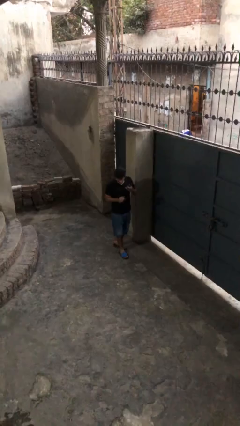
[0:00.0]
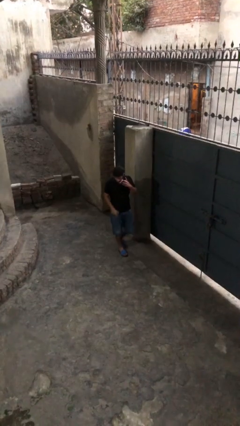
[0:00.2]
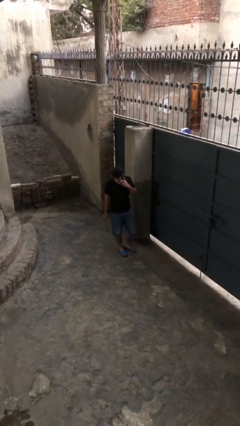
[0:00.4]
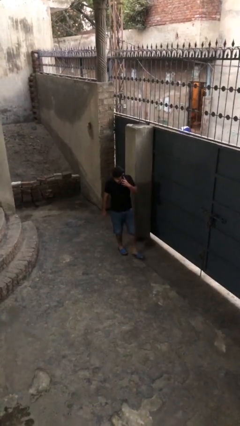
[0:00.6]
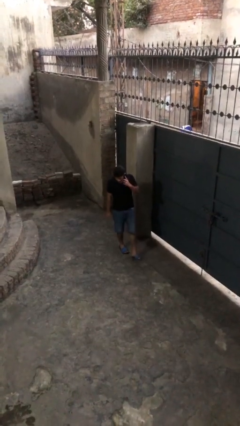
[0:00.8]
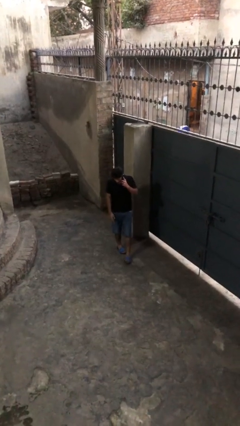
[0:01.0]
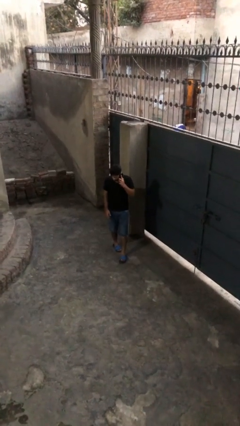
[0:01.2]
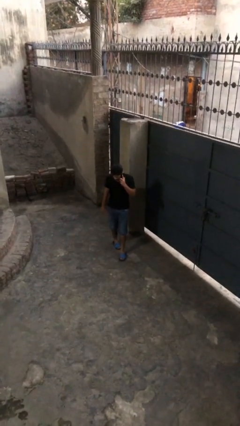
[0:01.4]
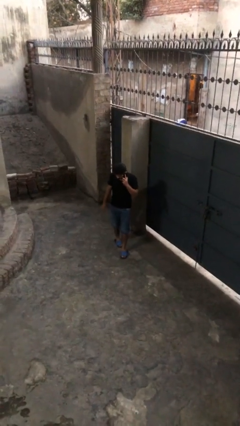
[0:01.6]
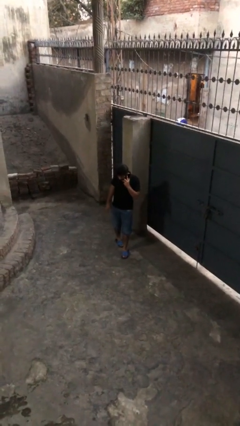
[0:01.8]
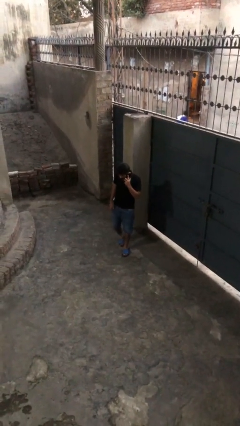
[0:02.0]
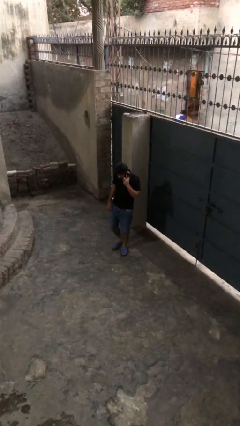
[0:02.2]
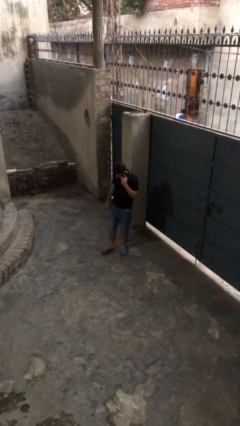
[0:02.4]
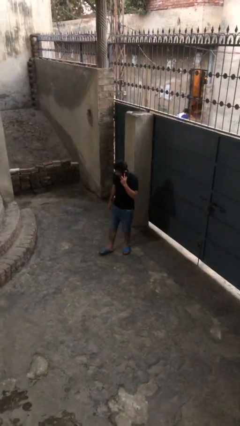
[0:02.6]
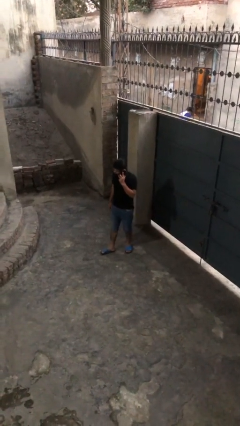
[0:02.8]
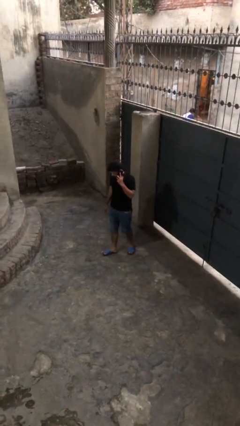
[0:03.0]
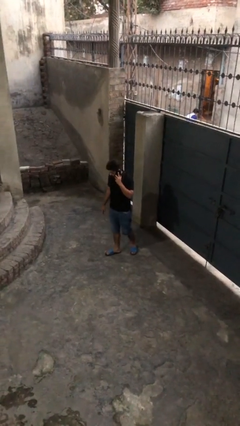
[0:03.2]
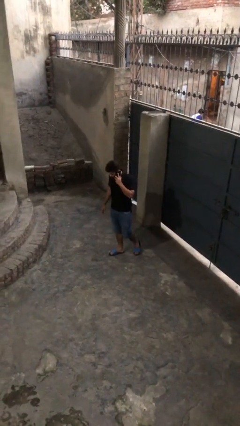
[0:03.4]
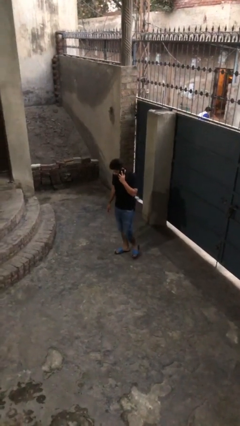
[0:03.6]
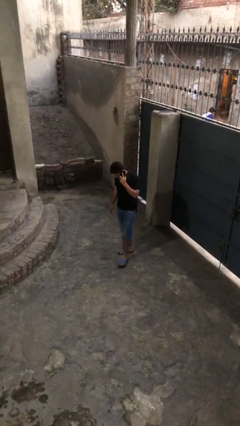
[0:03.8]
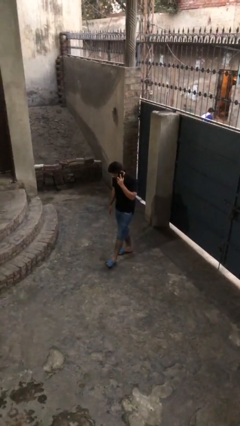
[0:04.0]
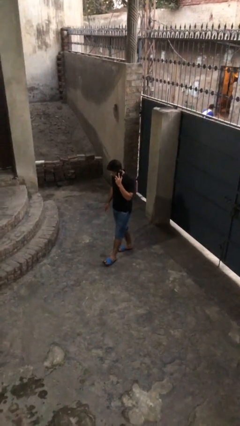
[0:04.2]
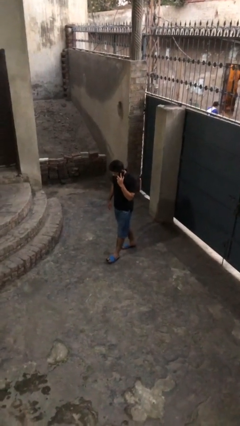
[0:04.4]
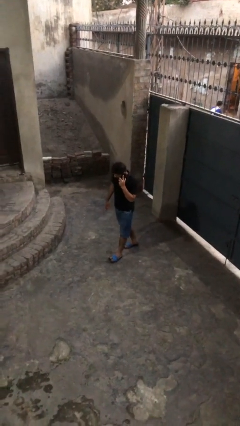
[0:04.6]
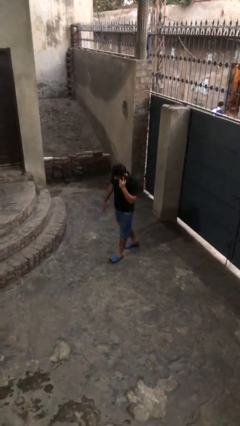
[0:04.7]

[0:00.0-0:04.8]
person talks on phone

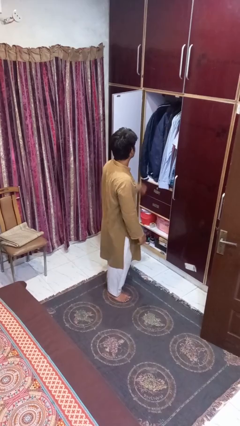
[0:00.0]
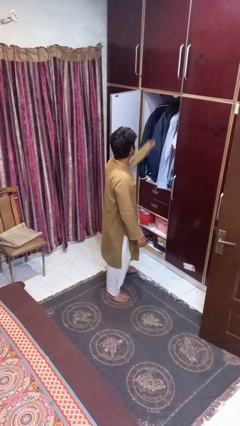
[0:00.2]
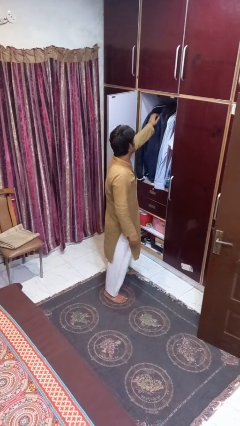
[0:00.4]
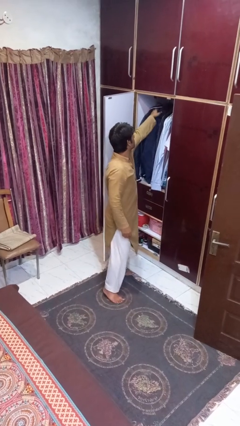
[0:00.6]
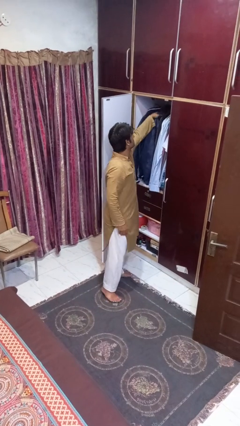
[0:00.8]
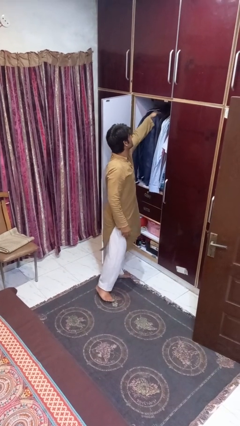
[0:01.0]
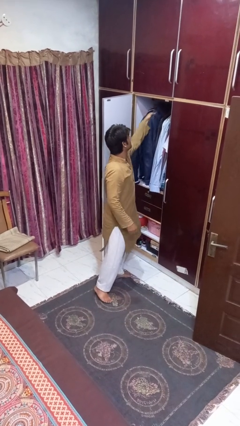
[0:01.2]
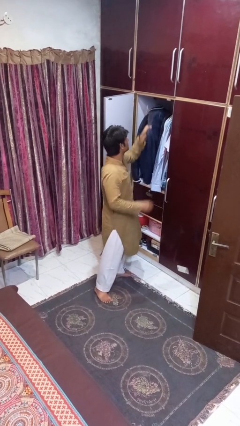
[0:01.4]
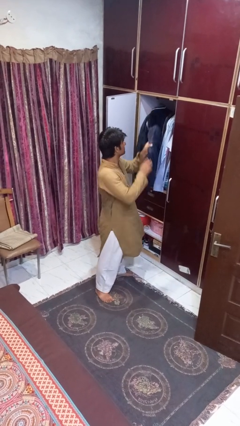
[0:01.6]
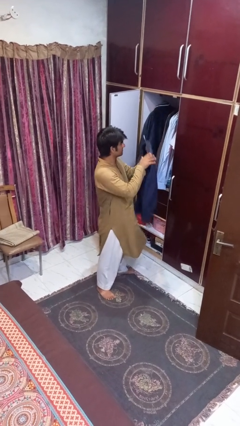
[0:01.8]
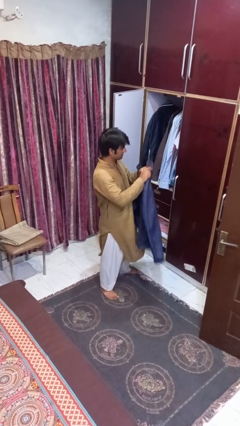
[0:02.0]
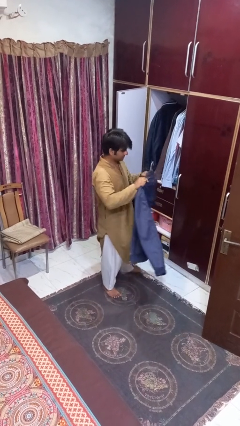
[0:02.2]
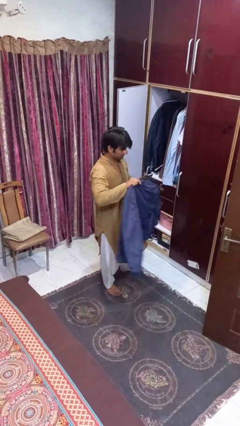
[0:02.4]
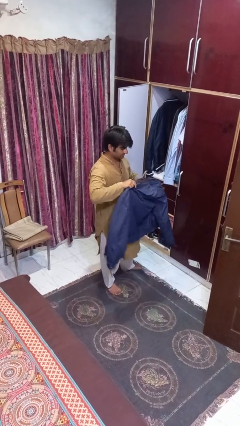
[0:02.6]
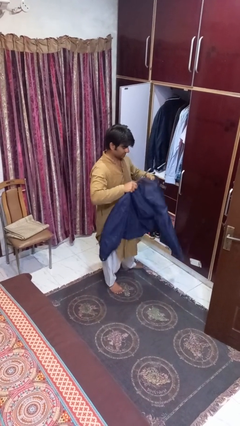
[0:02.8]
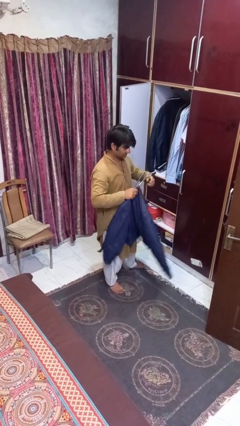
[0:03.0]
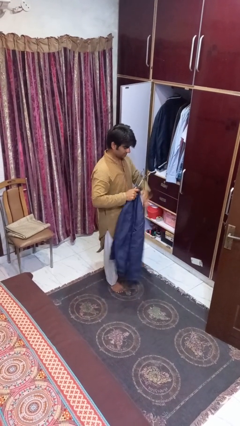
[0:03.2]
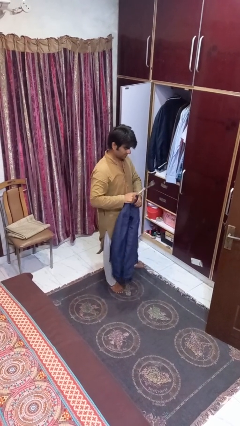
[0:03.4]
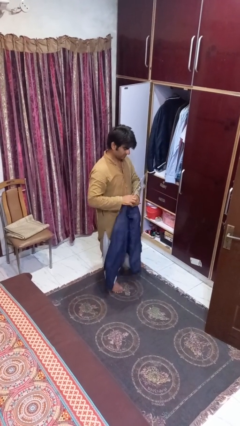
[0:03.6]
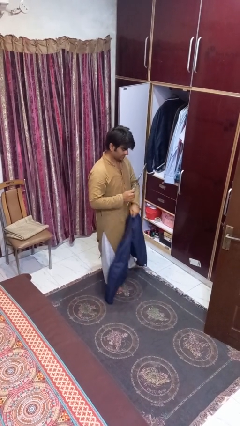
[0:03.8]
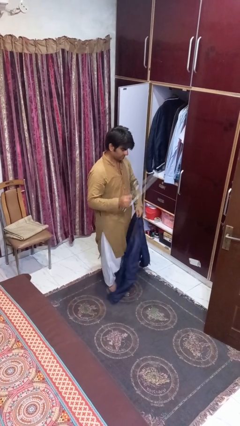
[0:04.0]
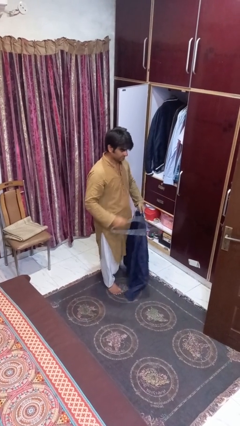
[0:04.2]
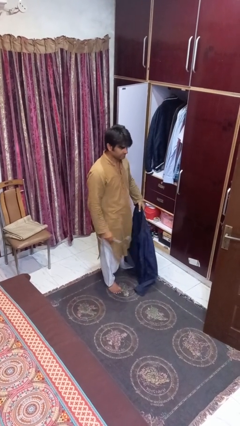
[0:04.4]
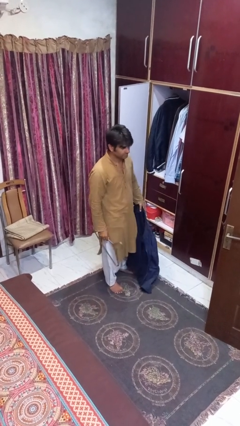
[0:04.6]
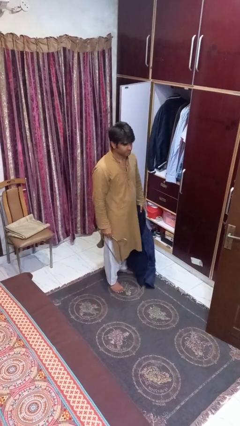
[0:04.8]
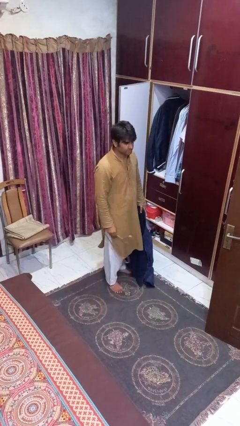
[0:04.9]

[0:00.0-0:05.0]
person takes clothes from closet

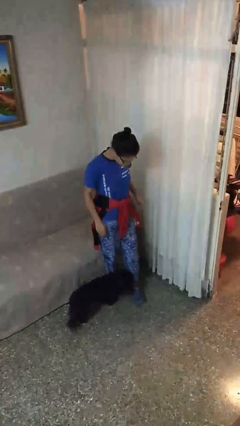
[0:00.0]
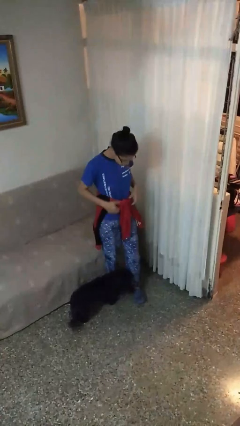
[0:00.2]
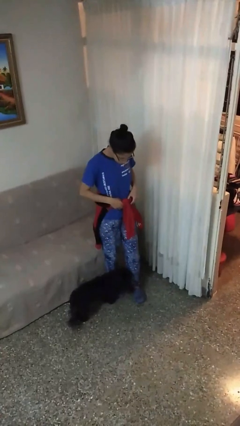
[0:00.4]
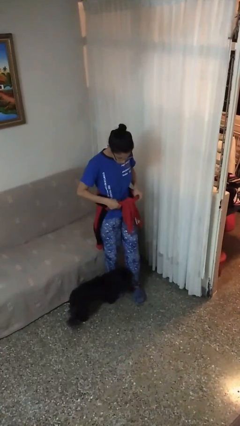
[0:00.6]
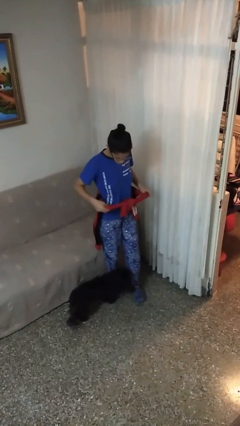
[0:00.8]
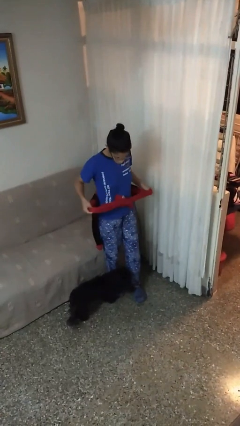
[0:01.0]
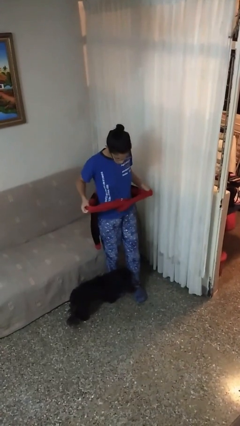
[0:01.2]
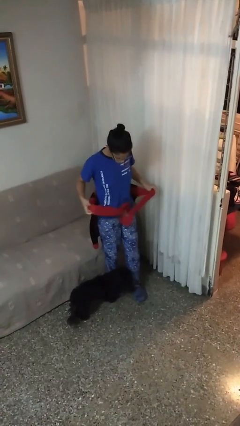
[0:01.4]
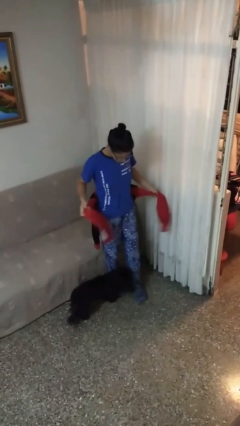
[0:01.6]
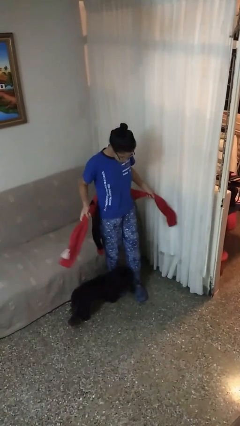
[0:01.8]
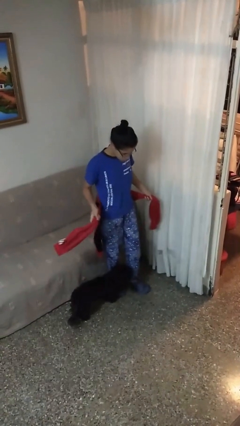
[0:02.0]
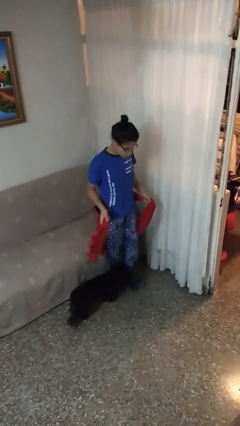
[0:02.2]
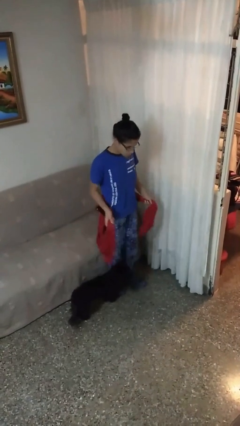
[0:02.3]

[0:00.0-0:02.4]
person unties jacket around waist

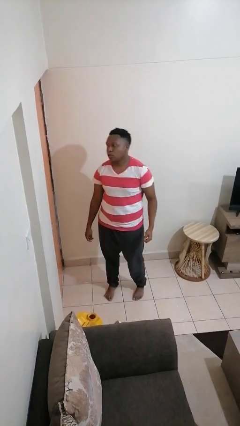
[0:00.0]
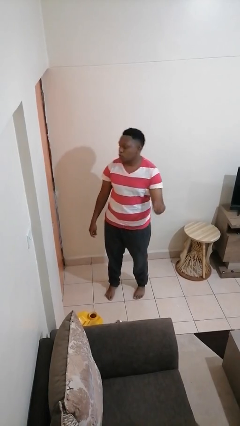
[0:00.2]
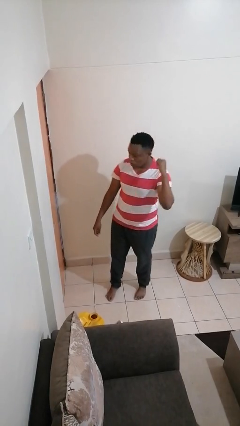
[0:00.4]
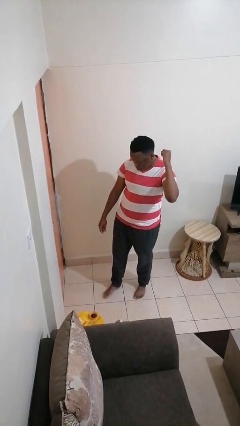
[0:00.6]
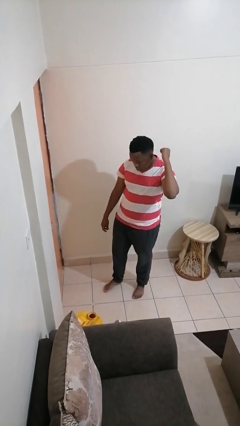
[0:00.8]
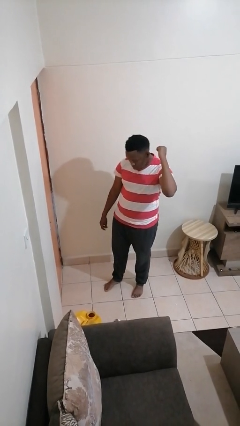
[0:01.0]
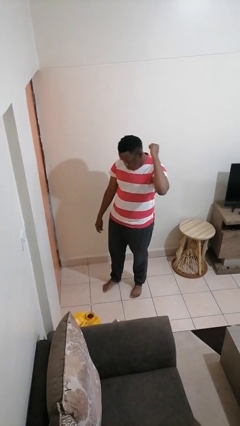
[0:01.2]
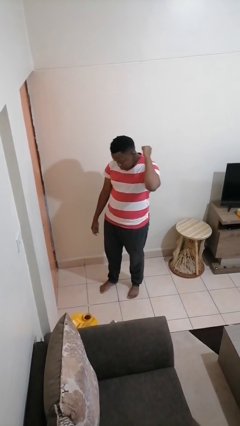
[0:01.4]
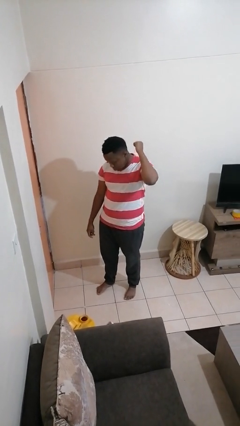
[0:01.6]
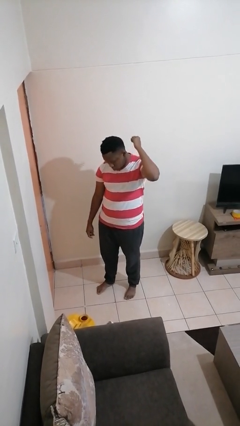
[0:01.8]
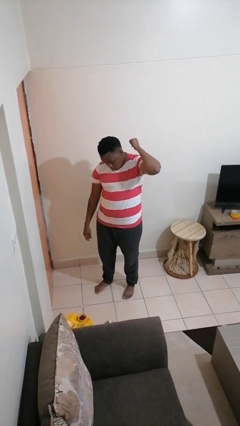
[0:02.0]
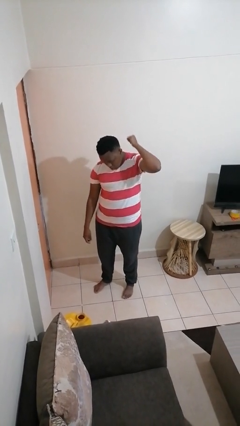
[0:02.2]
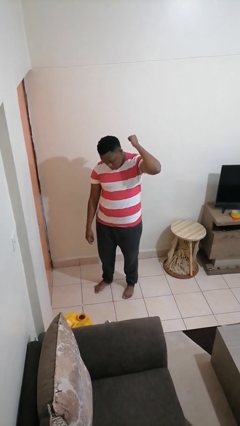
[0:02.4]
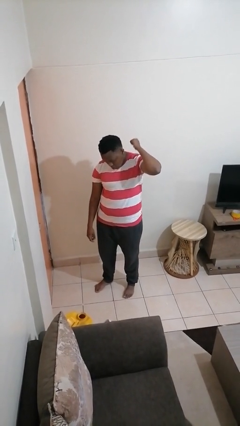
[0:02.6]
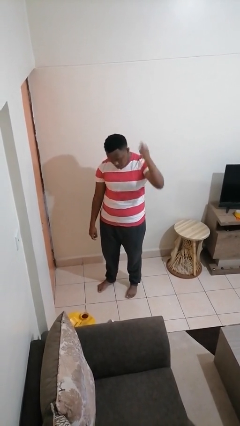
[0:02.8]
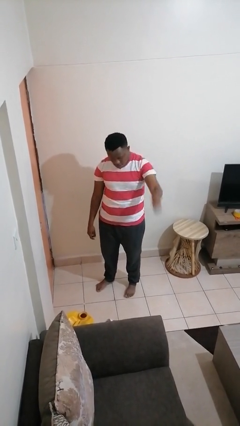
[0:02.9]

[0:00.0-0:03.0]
person gestures behind me

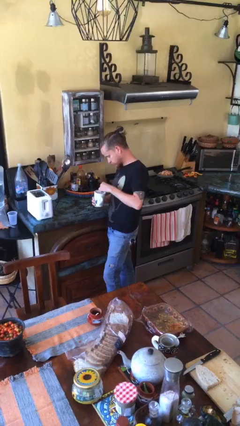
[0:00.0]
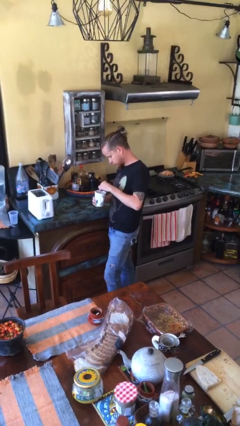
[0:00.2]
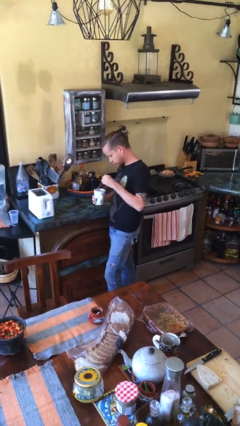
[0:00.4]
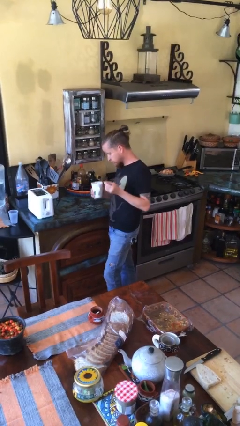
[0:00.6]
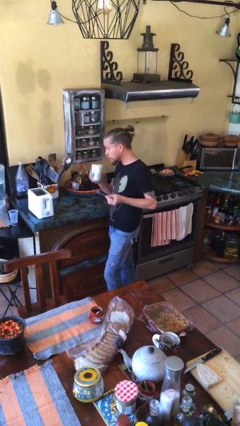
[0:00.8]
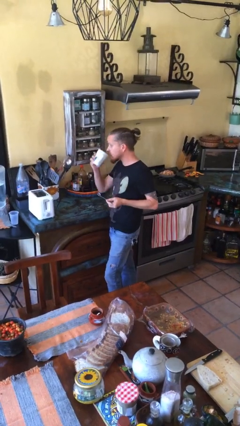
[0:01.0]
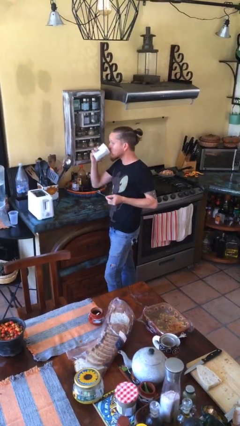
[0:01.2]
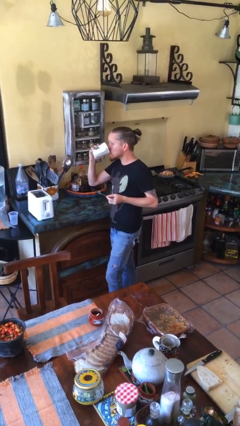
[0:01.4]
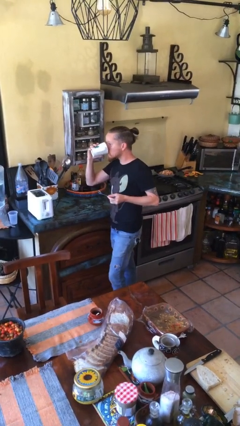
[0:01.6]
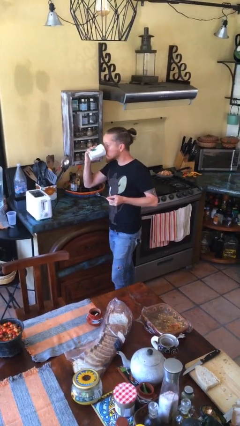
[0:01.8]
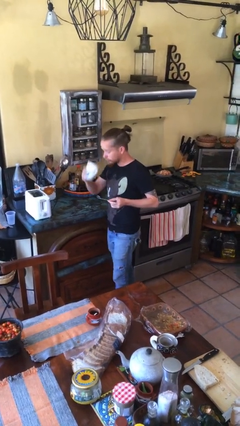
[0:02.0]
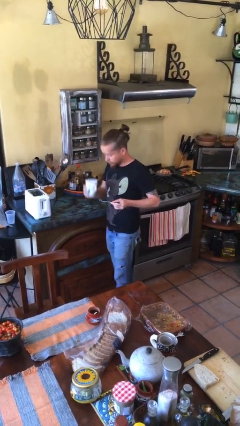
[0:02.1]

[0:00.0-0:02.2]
person drinks from mug

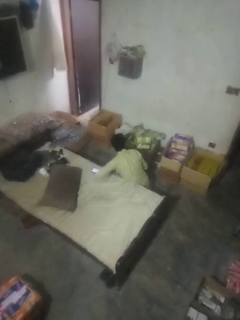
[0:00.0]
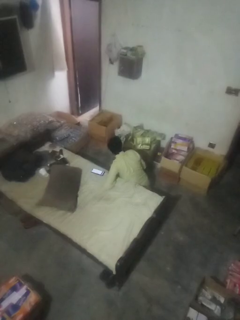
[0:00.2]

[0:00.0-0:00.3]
person searches under bed

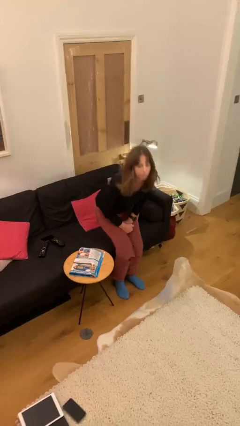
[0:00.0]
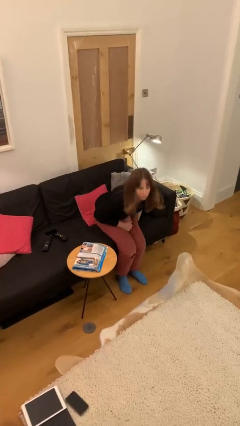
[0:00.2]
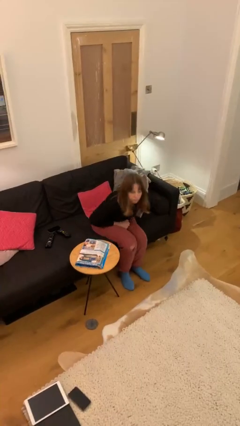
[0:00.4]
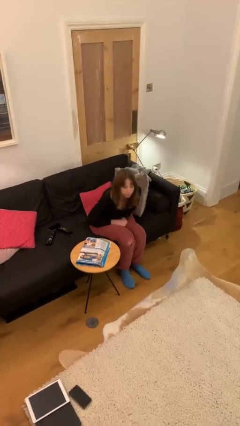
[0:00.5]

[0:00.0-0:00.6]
person sits down
